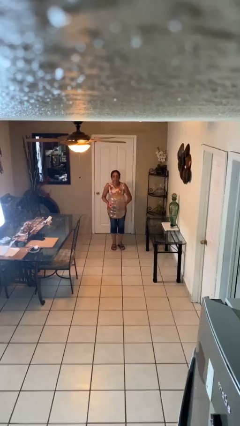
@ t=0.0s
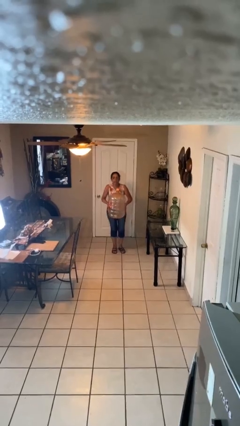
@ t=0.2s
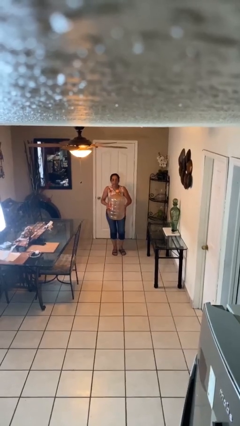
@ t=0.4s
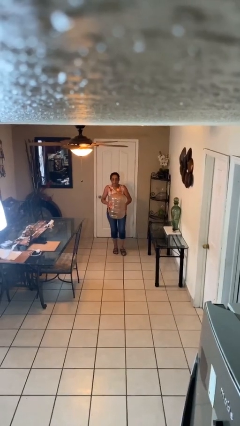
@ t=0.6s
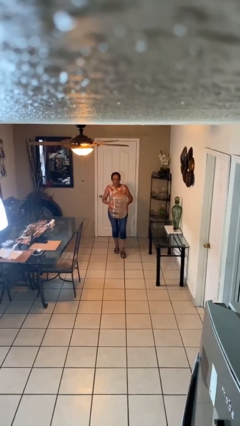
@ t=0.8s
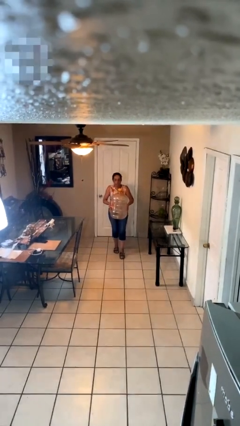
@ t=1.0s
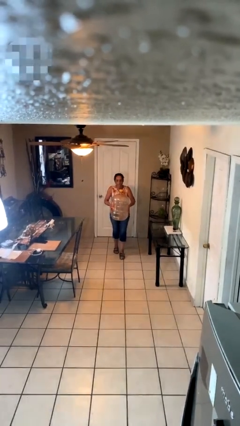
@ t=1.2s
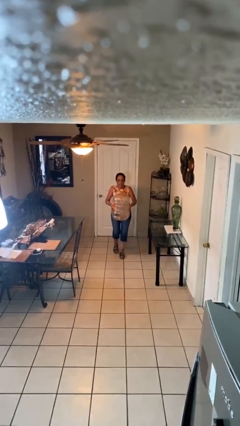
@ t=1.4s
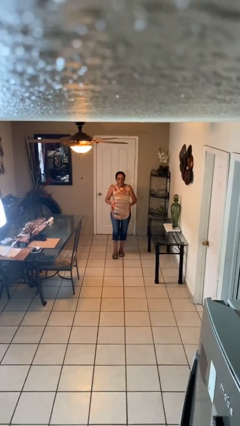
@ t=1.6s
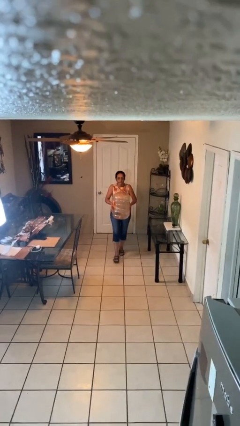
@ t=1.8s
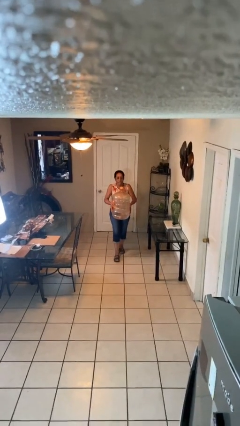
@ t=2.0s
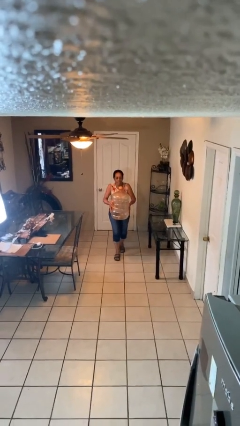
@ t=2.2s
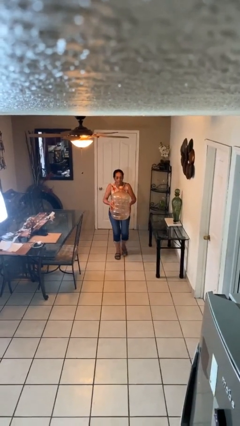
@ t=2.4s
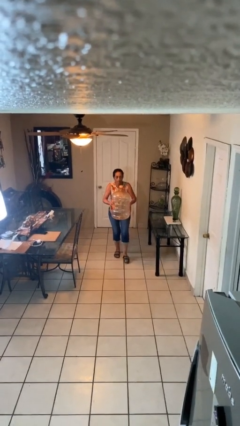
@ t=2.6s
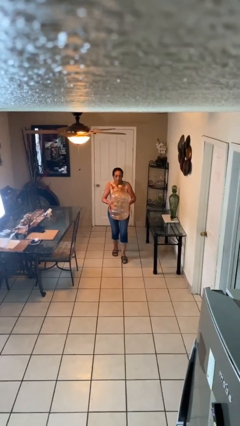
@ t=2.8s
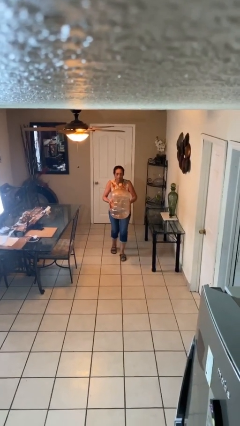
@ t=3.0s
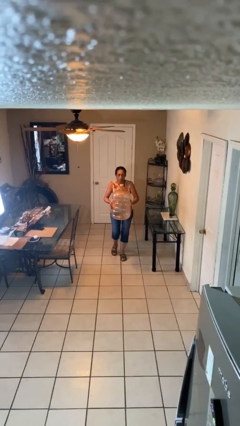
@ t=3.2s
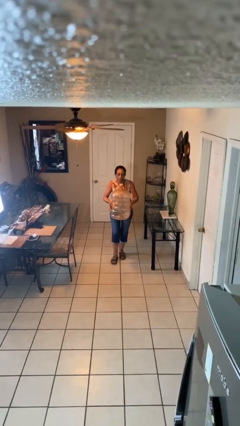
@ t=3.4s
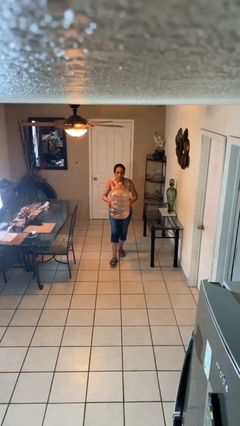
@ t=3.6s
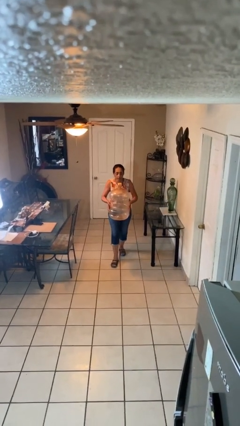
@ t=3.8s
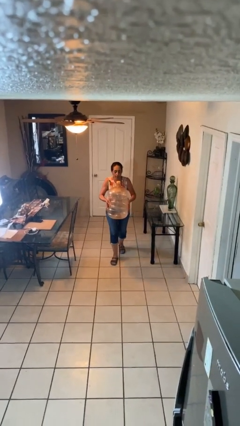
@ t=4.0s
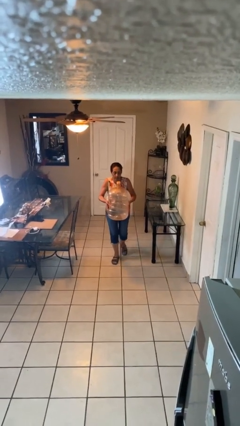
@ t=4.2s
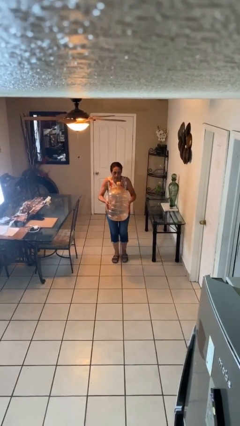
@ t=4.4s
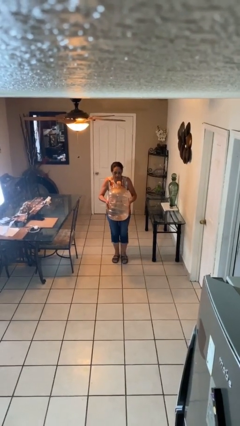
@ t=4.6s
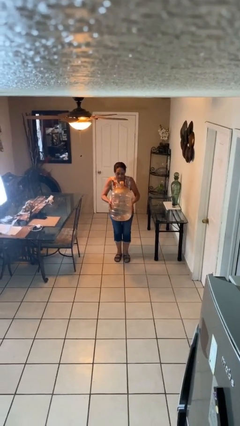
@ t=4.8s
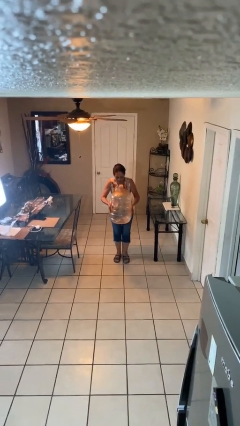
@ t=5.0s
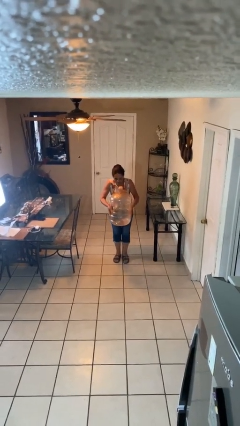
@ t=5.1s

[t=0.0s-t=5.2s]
person carries heavy object

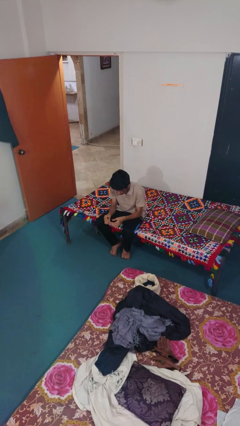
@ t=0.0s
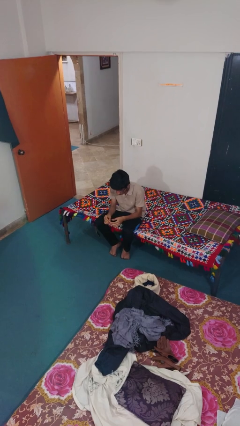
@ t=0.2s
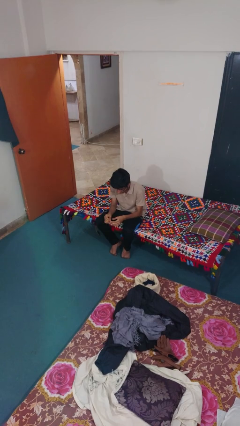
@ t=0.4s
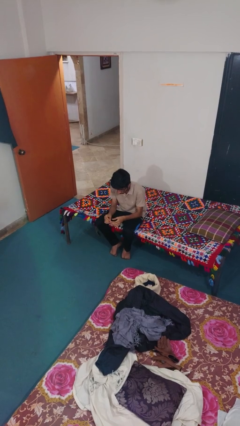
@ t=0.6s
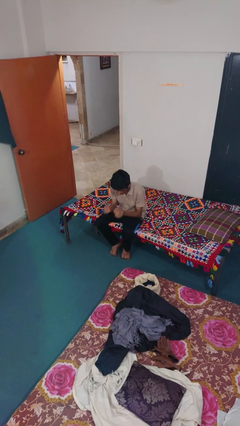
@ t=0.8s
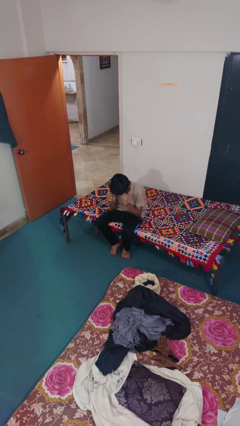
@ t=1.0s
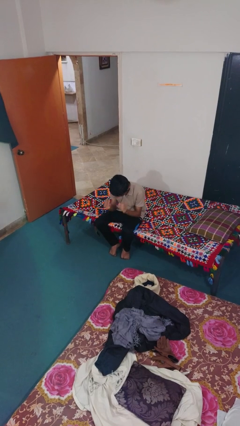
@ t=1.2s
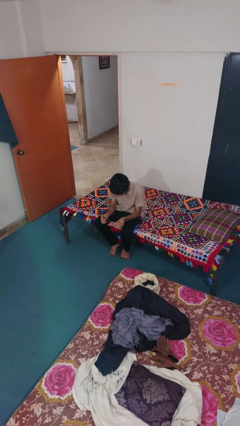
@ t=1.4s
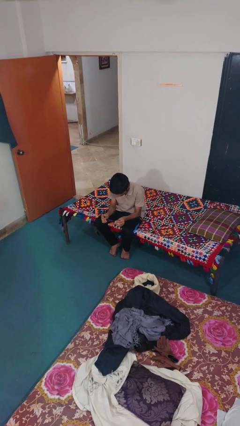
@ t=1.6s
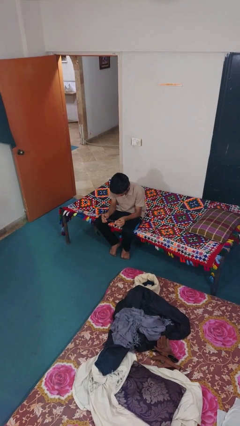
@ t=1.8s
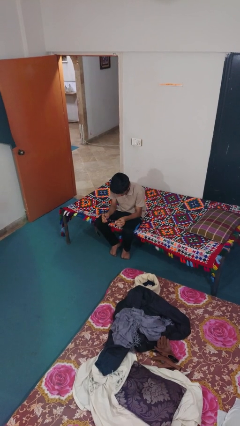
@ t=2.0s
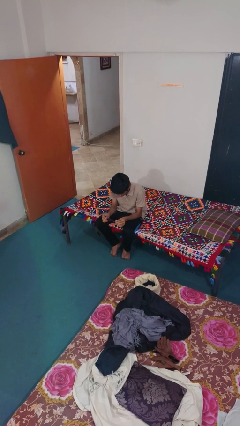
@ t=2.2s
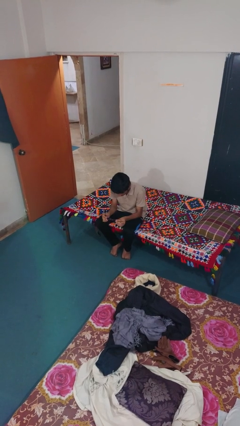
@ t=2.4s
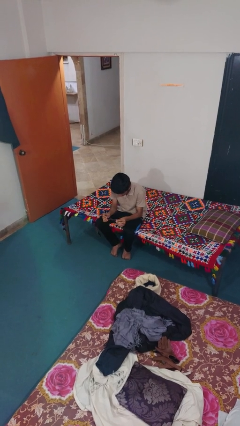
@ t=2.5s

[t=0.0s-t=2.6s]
person takes off glasses

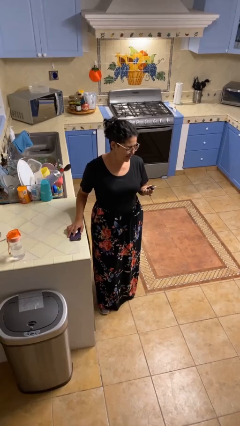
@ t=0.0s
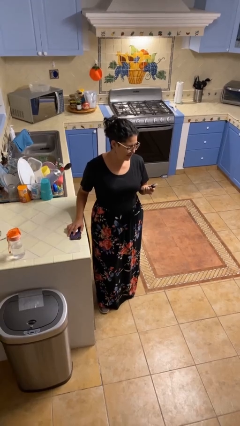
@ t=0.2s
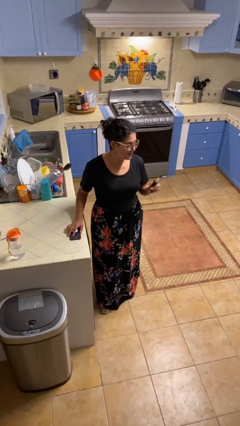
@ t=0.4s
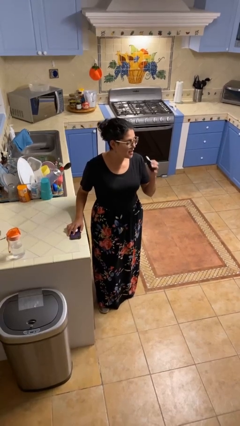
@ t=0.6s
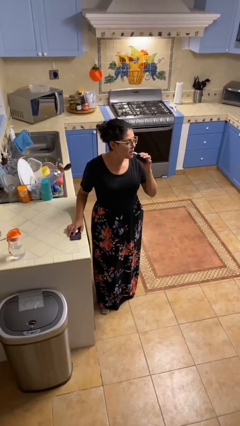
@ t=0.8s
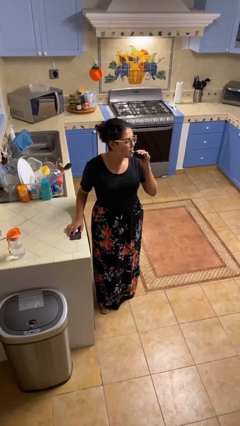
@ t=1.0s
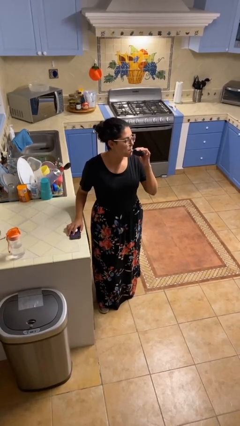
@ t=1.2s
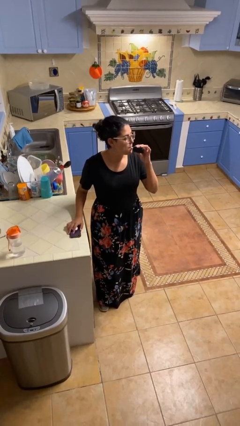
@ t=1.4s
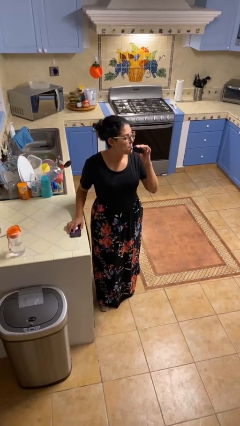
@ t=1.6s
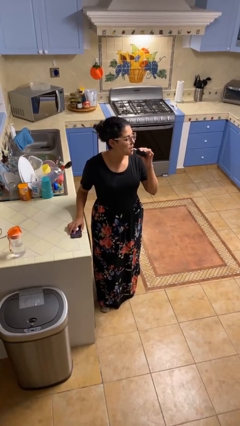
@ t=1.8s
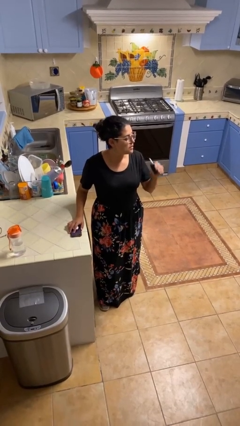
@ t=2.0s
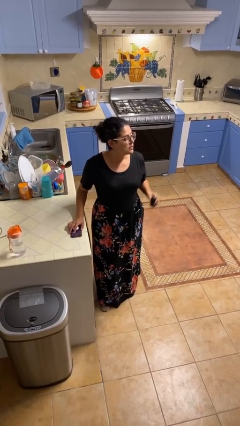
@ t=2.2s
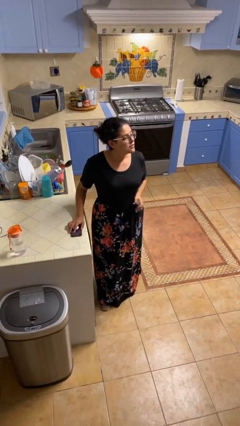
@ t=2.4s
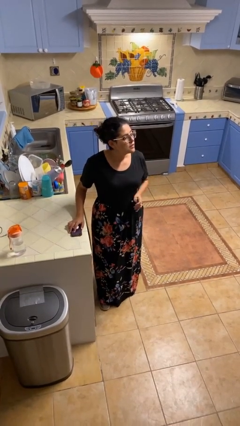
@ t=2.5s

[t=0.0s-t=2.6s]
person vapes

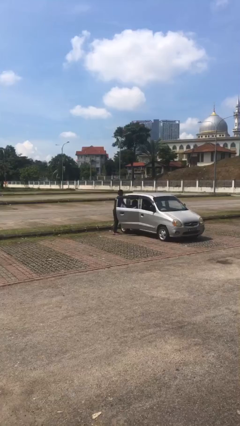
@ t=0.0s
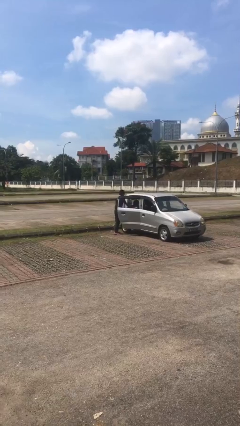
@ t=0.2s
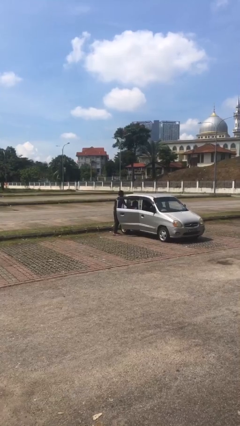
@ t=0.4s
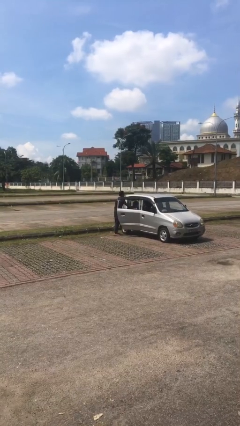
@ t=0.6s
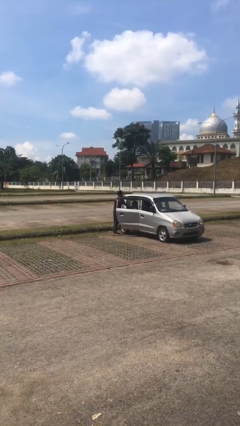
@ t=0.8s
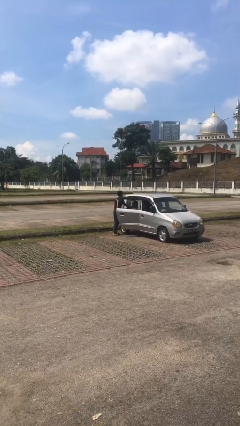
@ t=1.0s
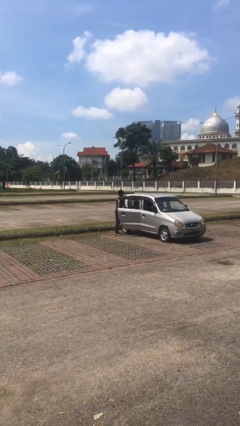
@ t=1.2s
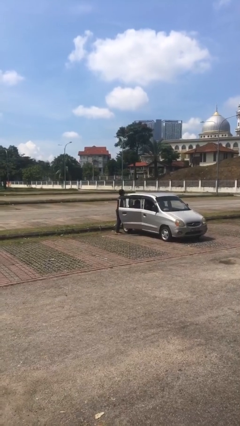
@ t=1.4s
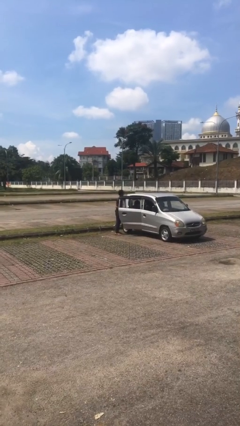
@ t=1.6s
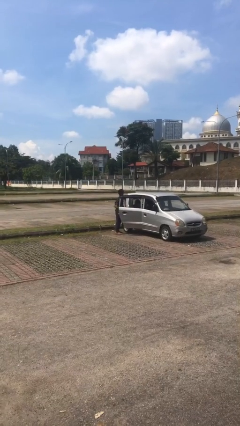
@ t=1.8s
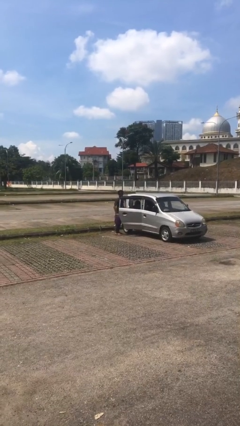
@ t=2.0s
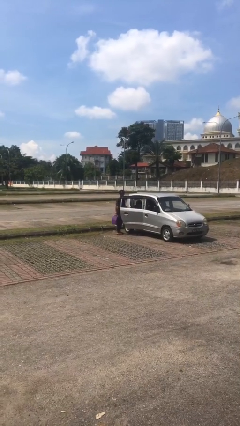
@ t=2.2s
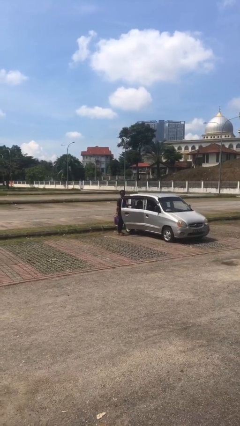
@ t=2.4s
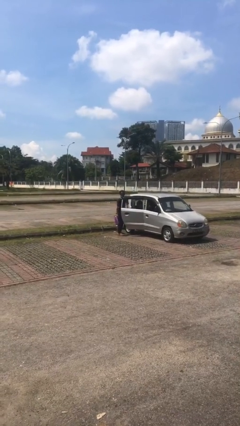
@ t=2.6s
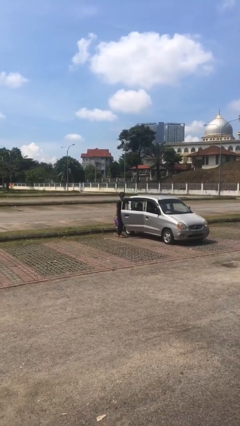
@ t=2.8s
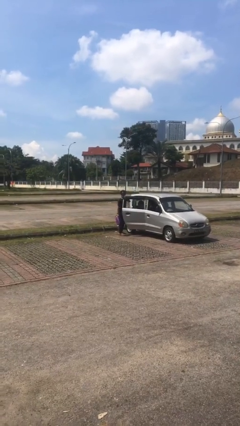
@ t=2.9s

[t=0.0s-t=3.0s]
person unloads car

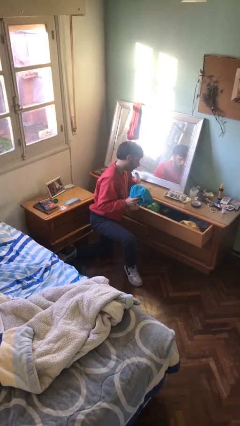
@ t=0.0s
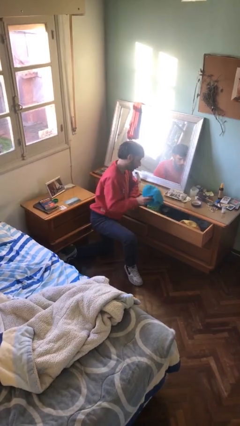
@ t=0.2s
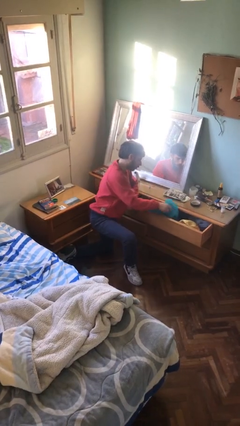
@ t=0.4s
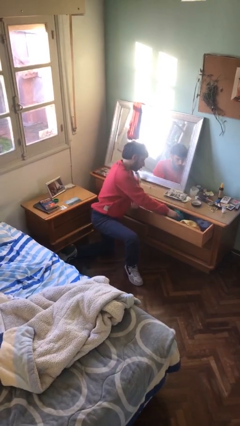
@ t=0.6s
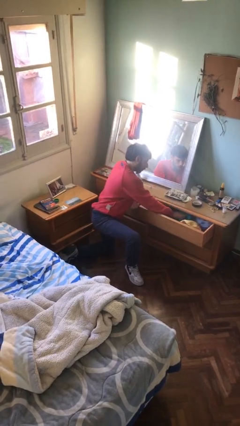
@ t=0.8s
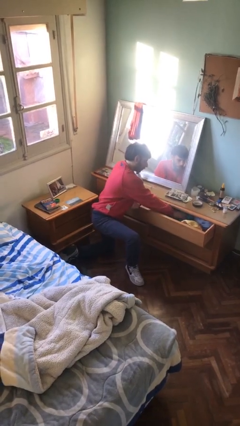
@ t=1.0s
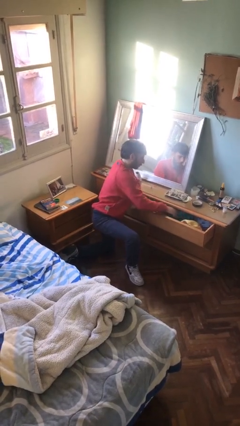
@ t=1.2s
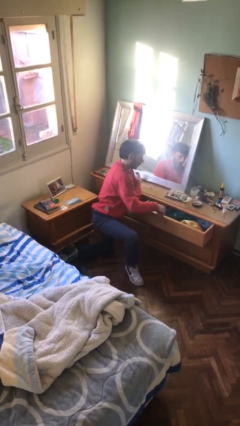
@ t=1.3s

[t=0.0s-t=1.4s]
person puts clothes into dresser

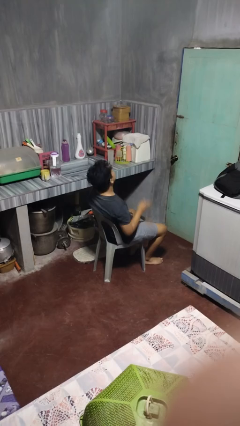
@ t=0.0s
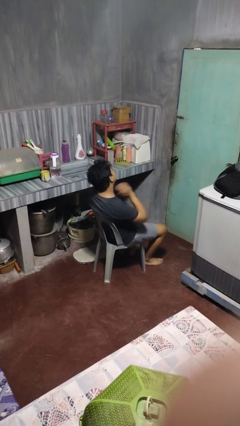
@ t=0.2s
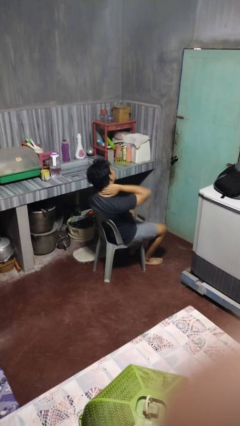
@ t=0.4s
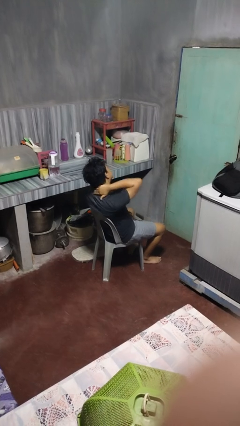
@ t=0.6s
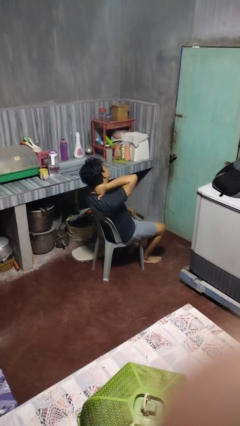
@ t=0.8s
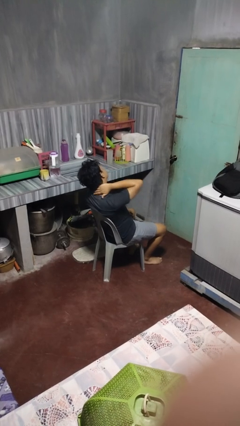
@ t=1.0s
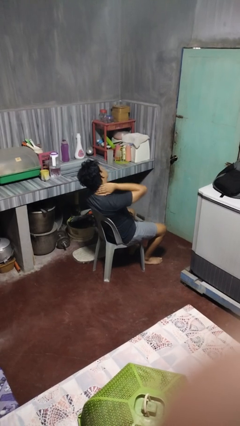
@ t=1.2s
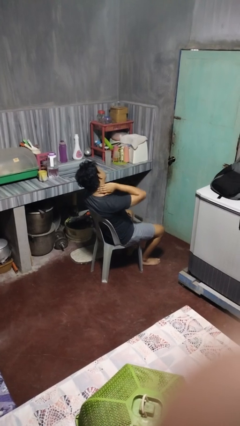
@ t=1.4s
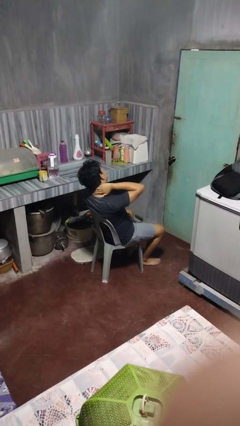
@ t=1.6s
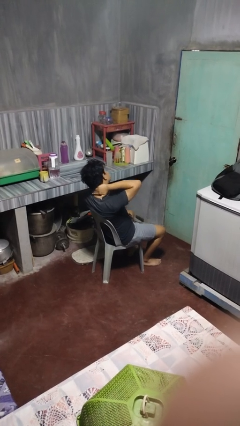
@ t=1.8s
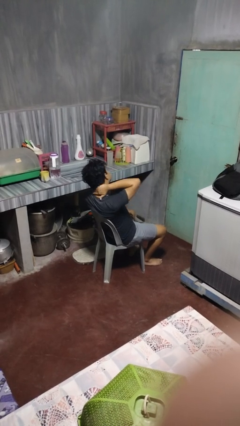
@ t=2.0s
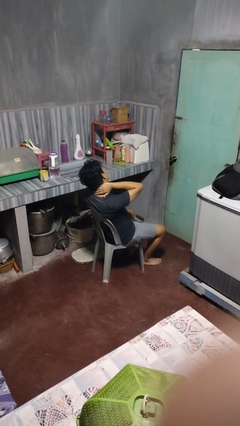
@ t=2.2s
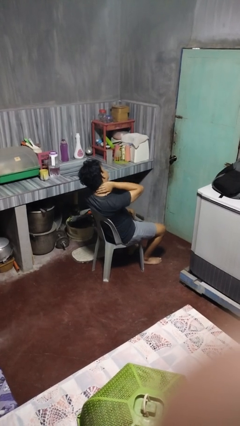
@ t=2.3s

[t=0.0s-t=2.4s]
person rubs neck
